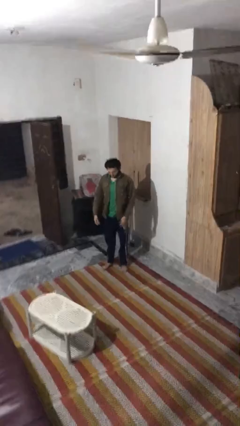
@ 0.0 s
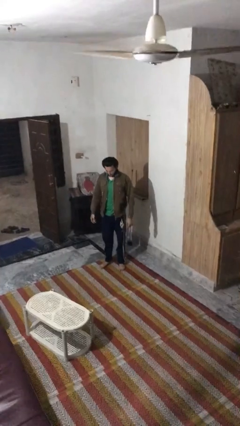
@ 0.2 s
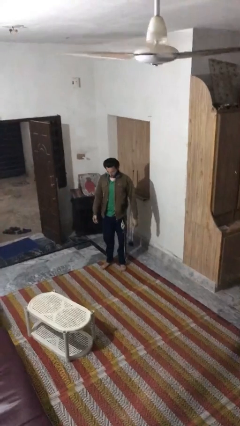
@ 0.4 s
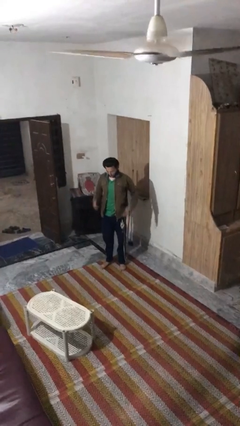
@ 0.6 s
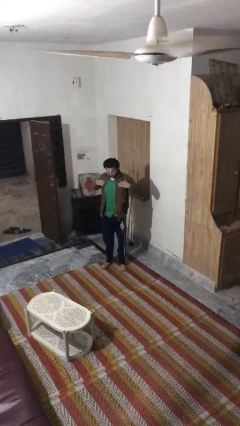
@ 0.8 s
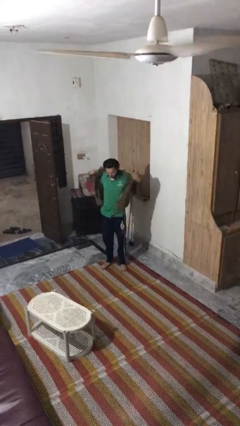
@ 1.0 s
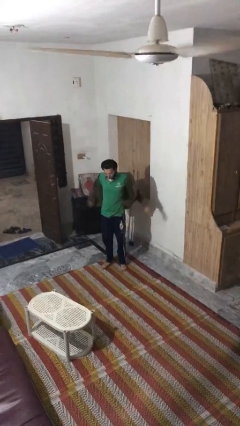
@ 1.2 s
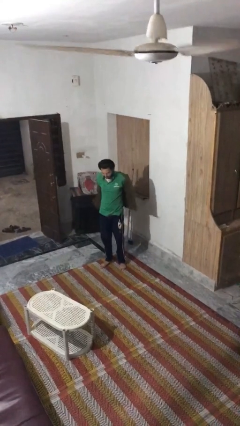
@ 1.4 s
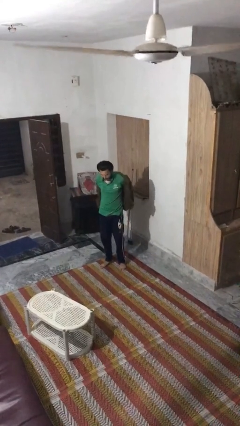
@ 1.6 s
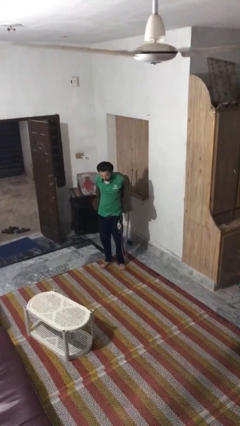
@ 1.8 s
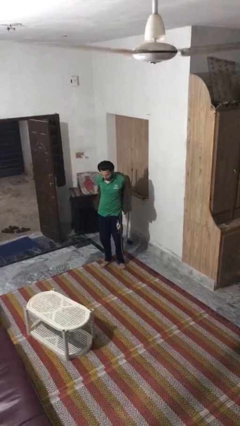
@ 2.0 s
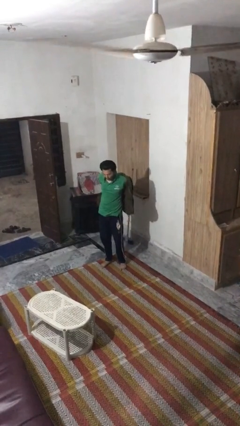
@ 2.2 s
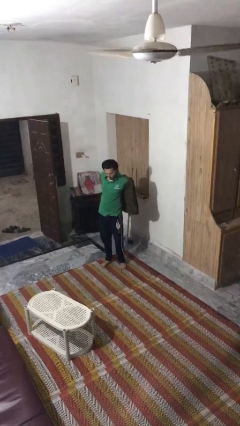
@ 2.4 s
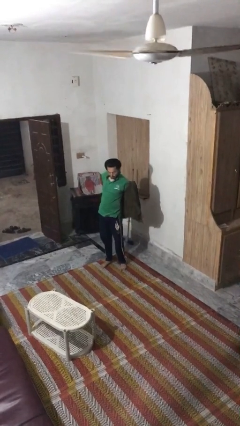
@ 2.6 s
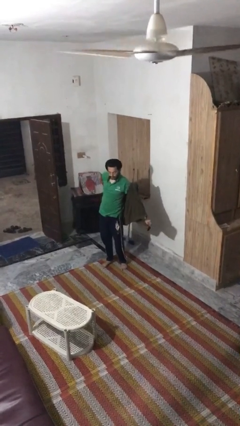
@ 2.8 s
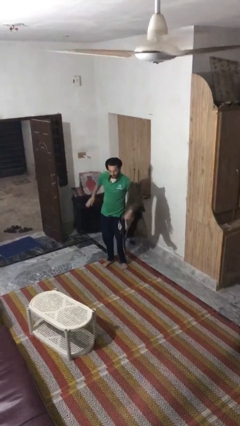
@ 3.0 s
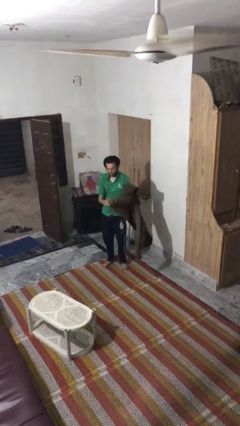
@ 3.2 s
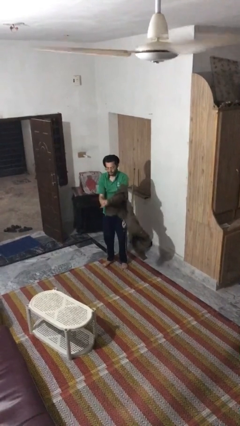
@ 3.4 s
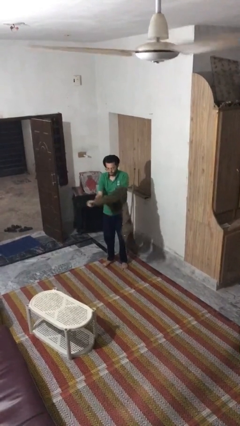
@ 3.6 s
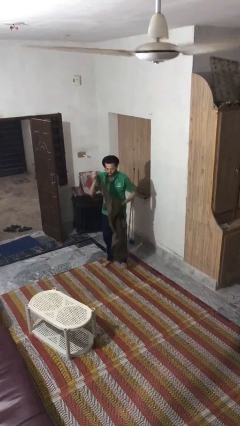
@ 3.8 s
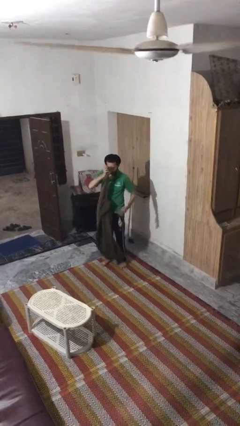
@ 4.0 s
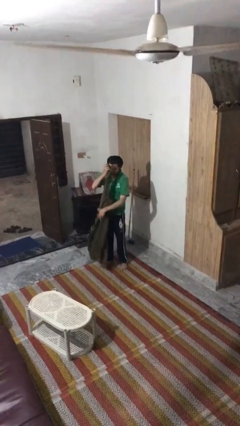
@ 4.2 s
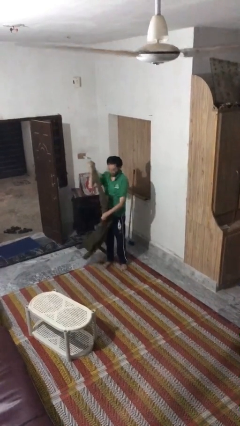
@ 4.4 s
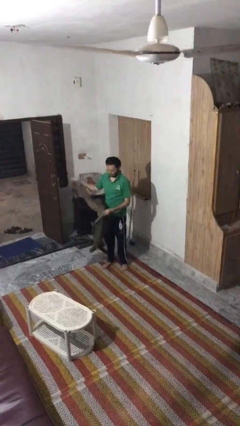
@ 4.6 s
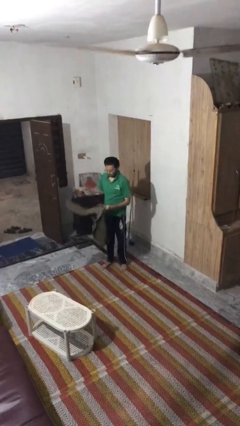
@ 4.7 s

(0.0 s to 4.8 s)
person takes off jacket

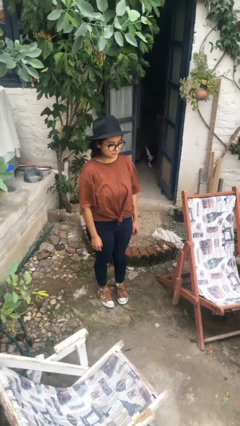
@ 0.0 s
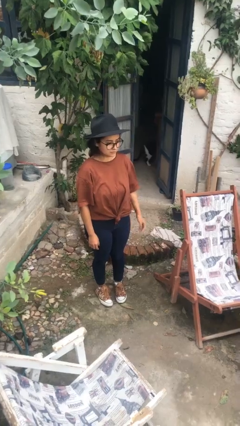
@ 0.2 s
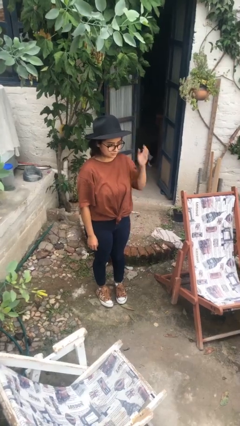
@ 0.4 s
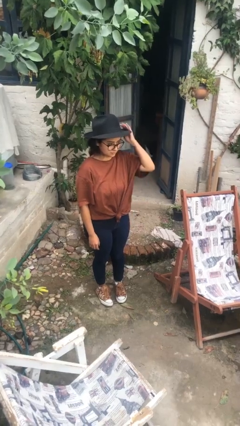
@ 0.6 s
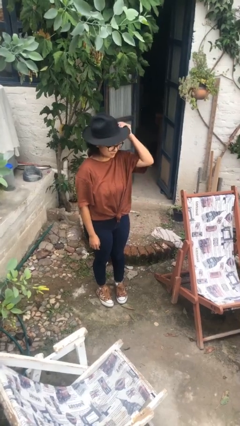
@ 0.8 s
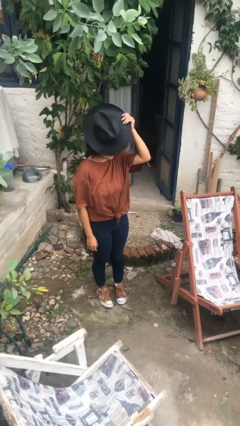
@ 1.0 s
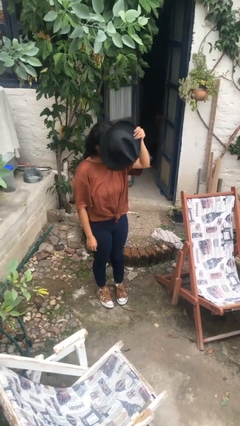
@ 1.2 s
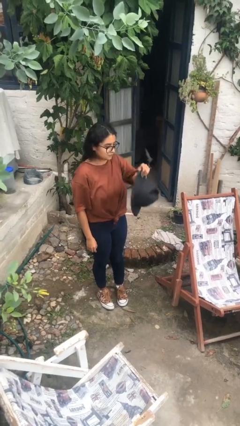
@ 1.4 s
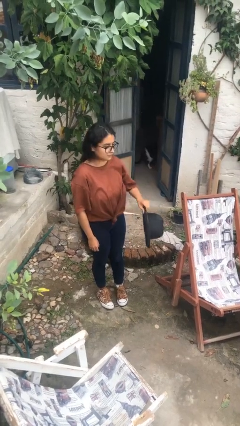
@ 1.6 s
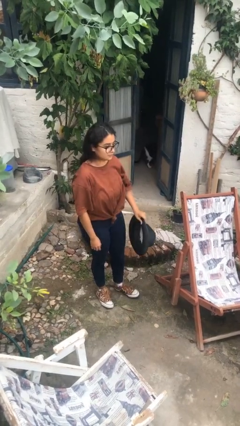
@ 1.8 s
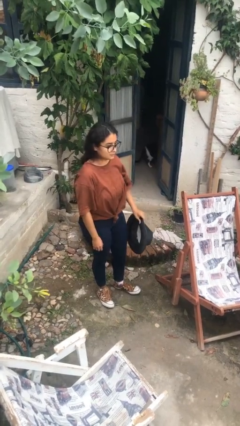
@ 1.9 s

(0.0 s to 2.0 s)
person takes off hat

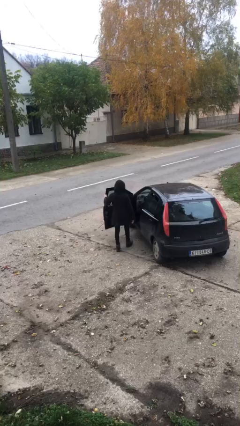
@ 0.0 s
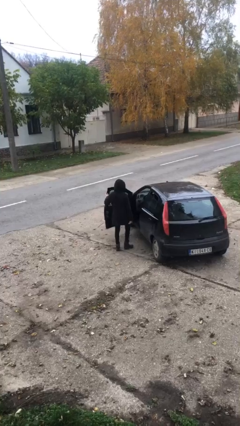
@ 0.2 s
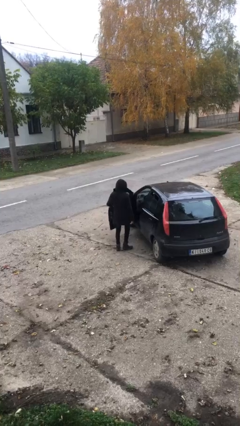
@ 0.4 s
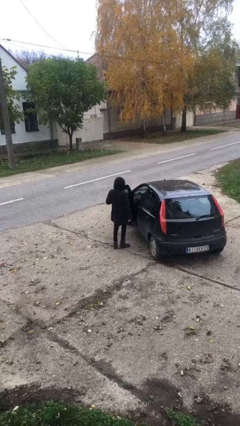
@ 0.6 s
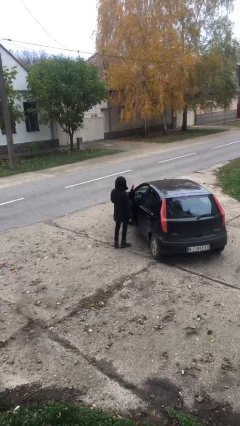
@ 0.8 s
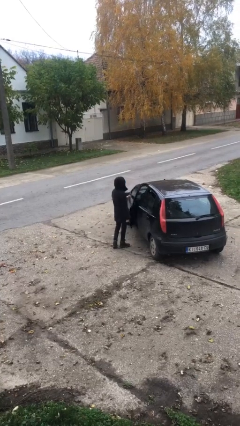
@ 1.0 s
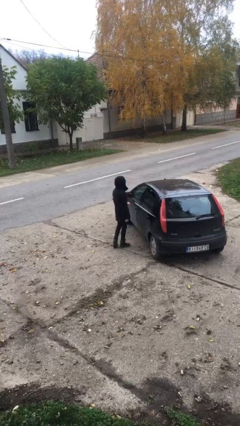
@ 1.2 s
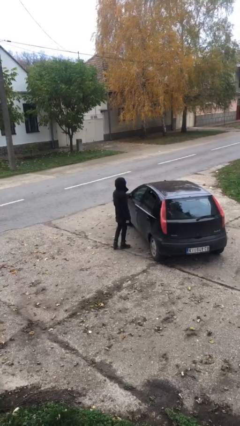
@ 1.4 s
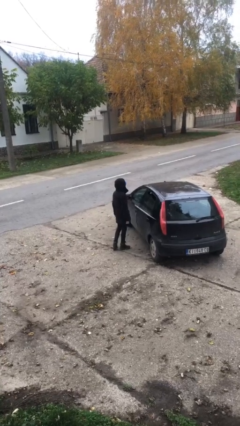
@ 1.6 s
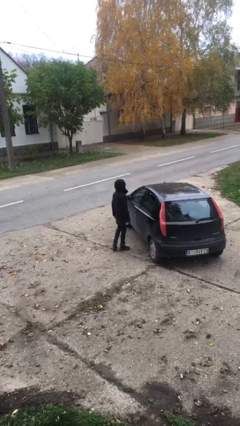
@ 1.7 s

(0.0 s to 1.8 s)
person closes car door

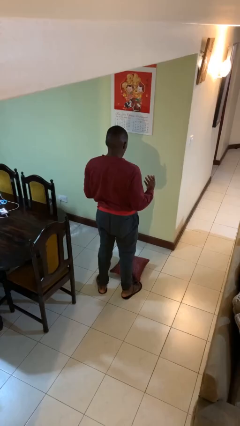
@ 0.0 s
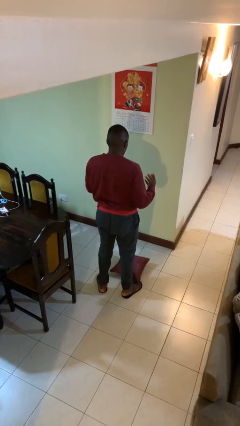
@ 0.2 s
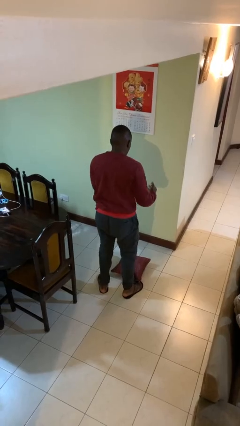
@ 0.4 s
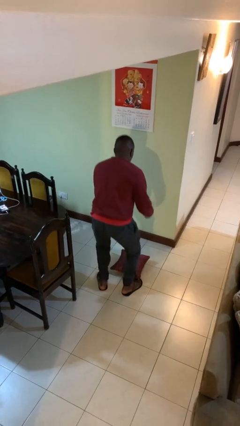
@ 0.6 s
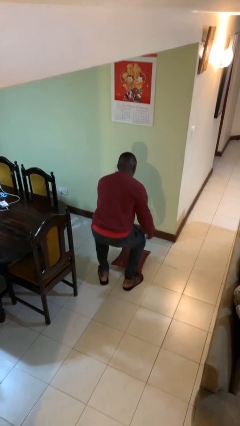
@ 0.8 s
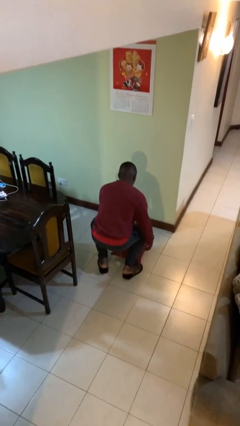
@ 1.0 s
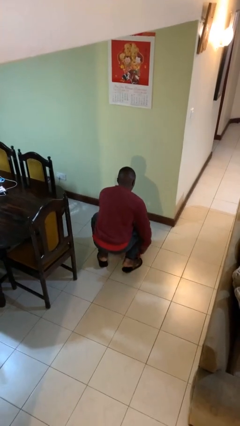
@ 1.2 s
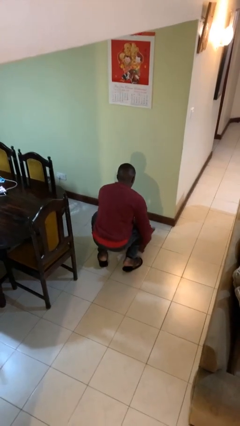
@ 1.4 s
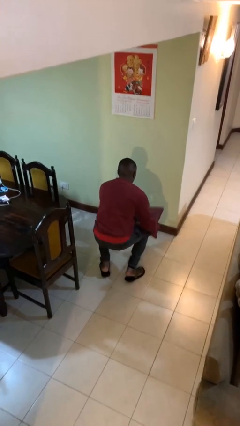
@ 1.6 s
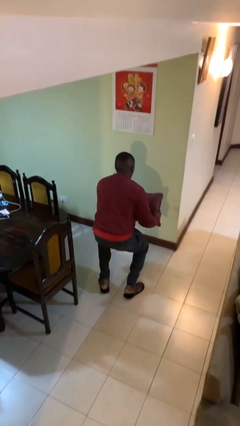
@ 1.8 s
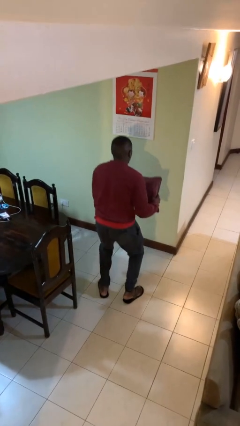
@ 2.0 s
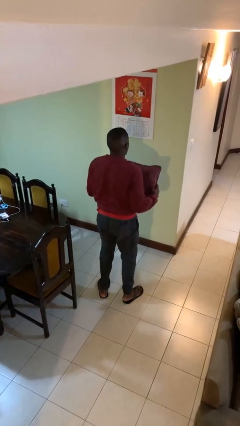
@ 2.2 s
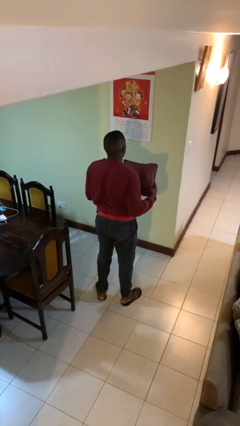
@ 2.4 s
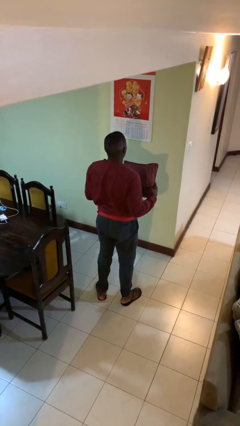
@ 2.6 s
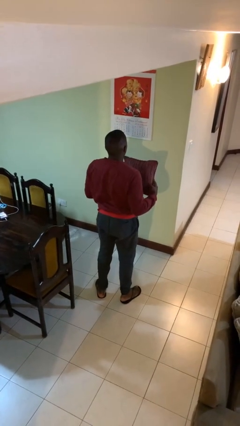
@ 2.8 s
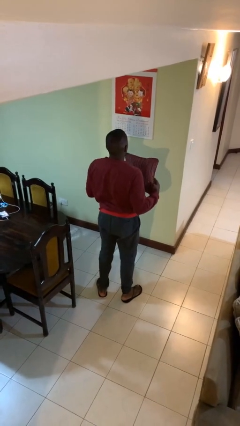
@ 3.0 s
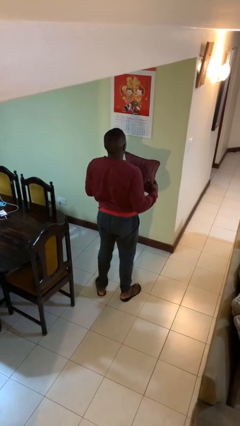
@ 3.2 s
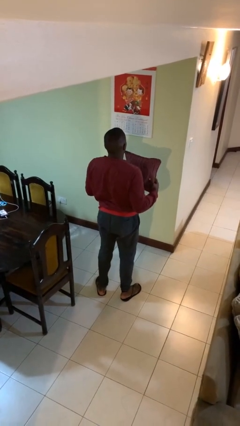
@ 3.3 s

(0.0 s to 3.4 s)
person picks up object from floor

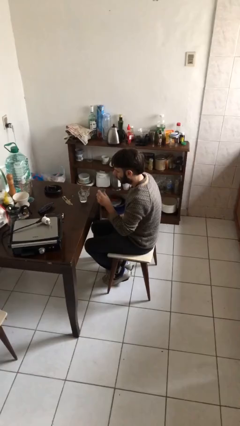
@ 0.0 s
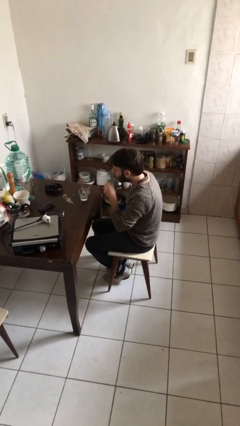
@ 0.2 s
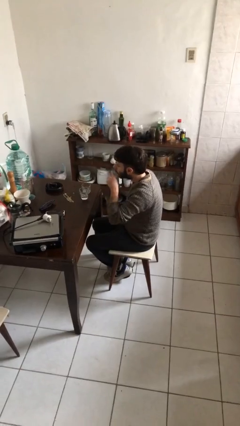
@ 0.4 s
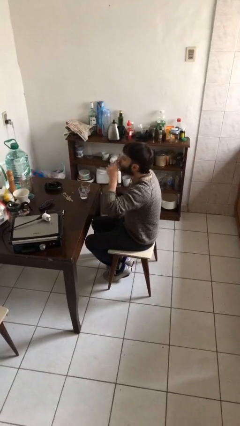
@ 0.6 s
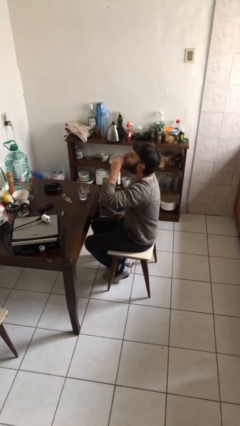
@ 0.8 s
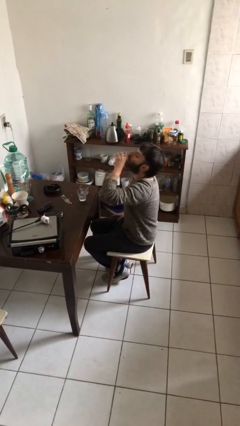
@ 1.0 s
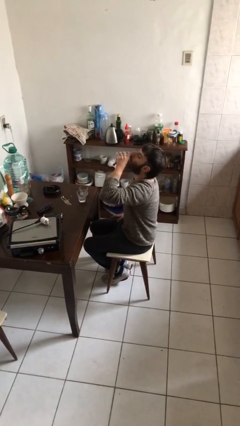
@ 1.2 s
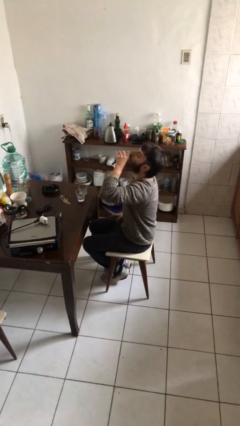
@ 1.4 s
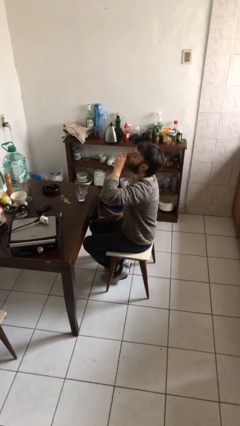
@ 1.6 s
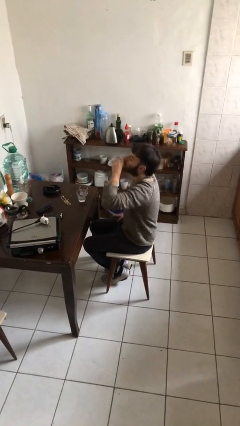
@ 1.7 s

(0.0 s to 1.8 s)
person drinks from shotglass

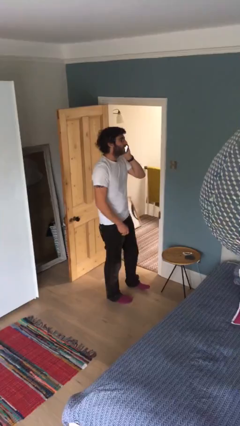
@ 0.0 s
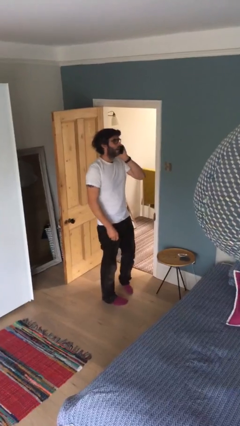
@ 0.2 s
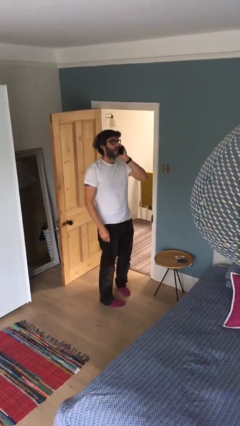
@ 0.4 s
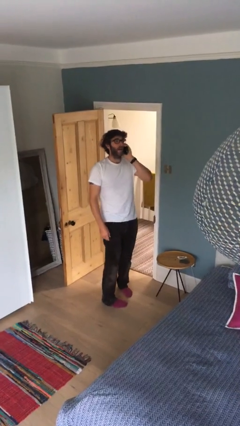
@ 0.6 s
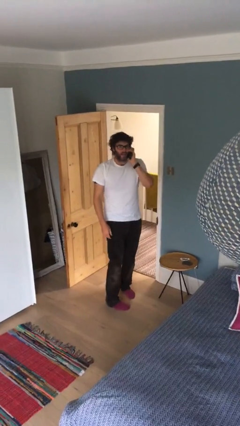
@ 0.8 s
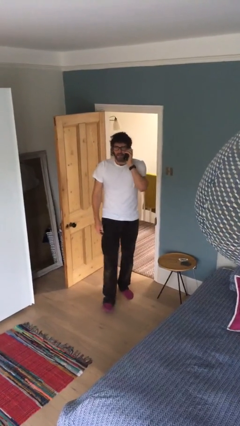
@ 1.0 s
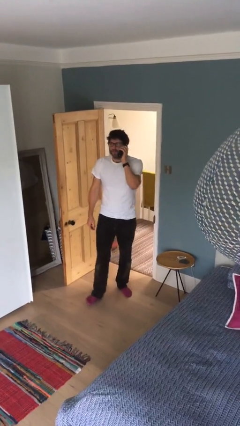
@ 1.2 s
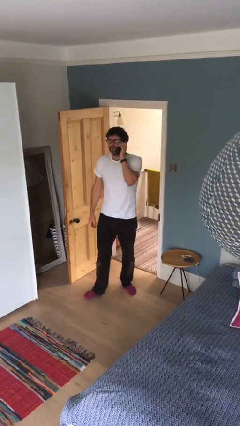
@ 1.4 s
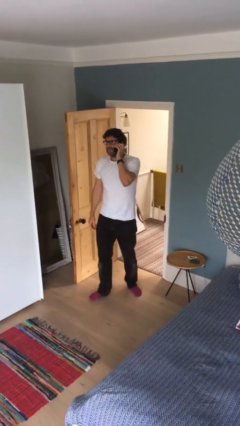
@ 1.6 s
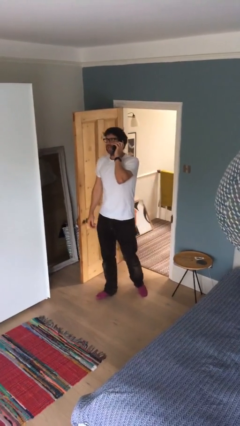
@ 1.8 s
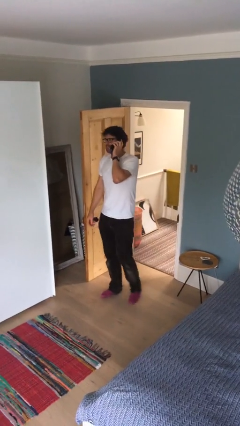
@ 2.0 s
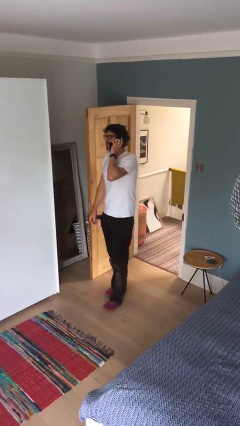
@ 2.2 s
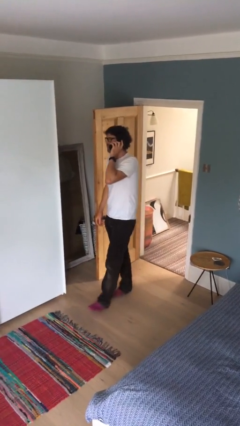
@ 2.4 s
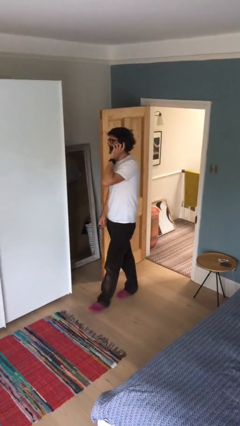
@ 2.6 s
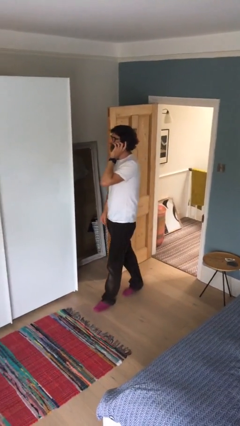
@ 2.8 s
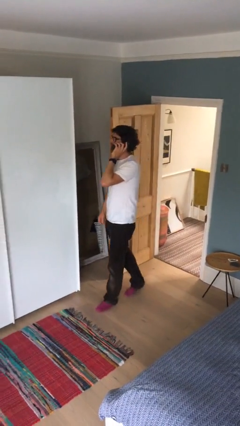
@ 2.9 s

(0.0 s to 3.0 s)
person talks on phone

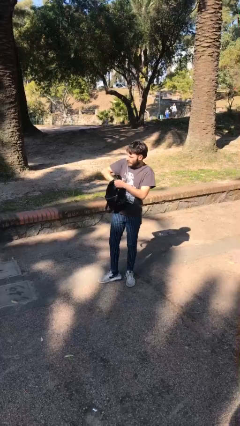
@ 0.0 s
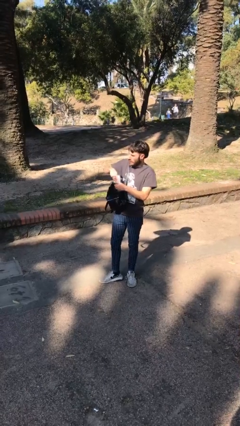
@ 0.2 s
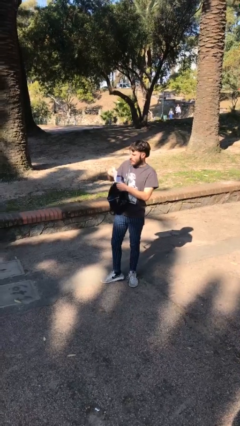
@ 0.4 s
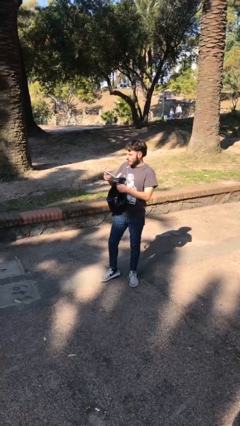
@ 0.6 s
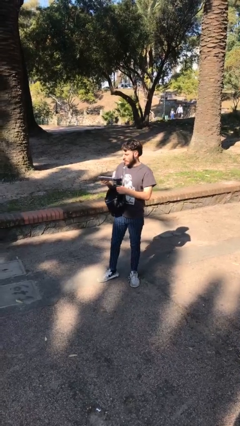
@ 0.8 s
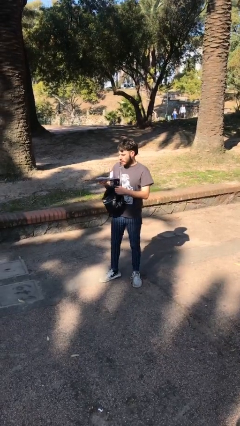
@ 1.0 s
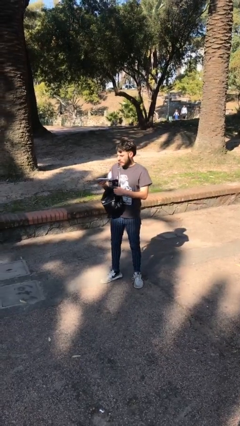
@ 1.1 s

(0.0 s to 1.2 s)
person takes object from backpack
